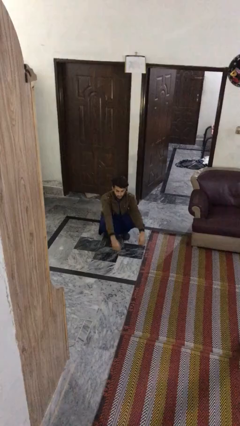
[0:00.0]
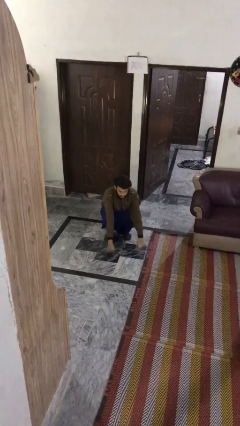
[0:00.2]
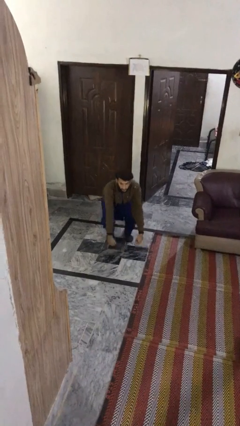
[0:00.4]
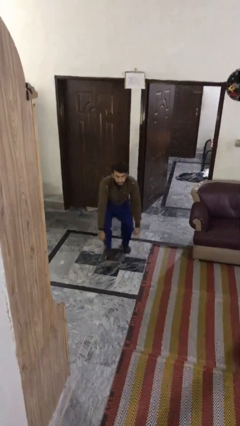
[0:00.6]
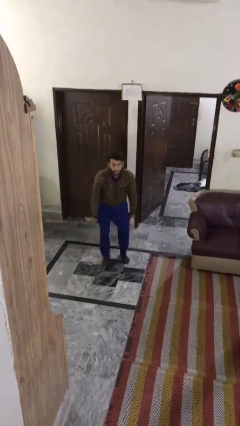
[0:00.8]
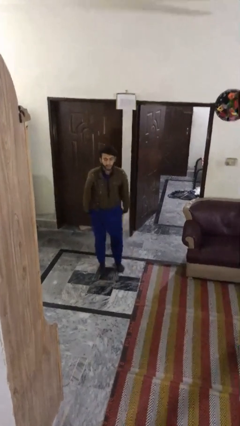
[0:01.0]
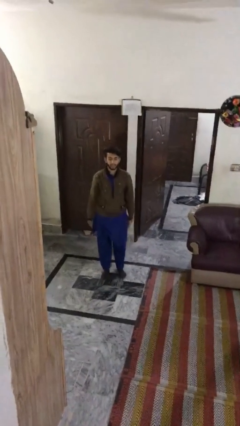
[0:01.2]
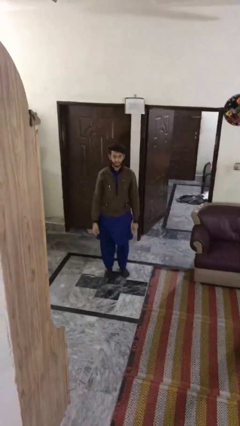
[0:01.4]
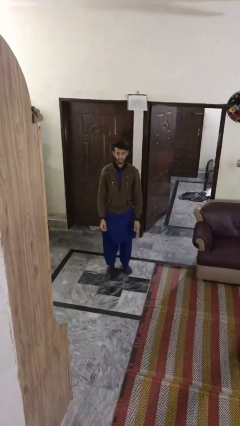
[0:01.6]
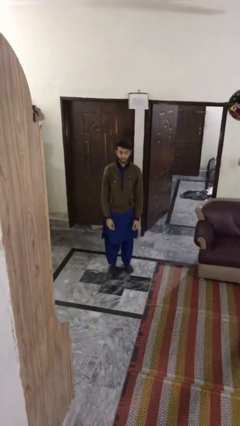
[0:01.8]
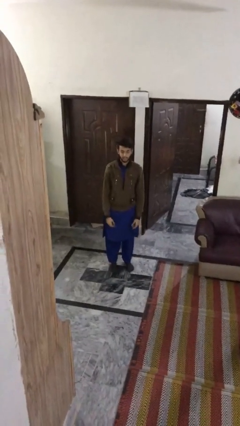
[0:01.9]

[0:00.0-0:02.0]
person stands up

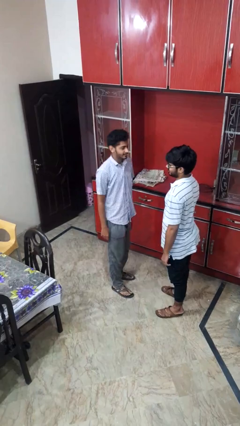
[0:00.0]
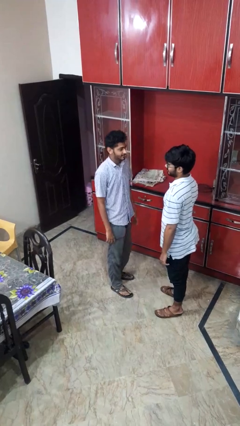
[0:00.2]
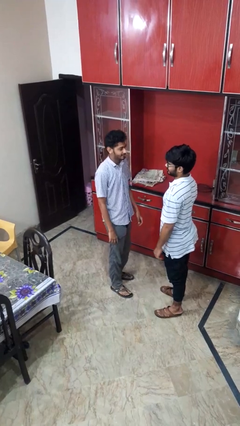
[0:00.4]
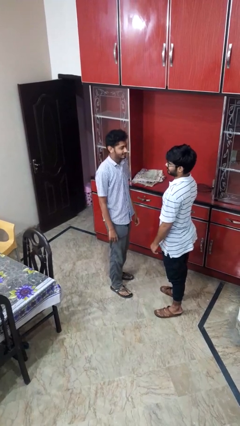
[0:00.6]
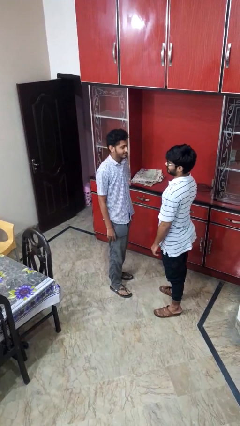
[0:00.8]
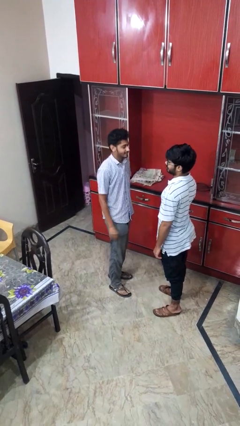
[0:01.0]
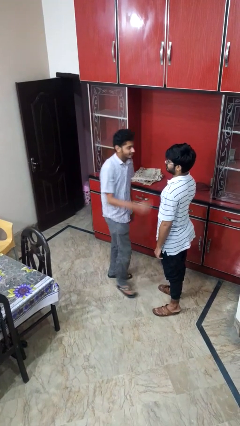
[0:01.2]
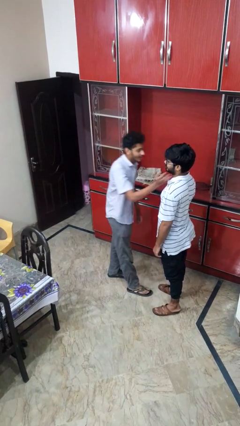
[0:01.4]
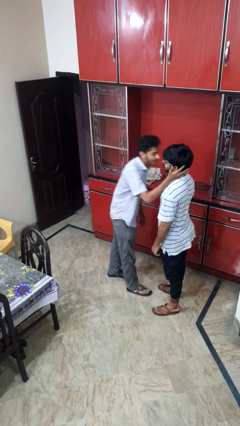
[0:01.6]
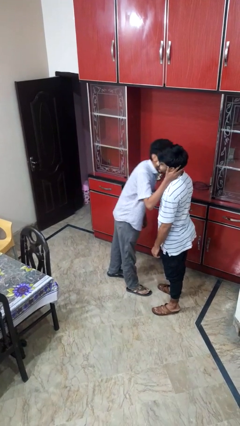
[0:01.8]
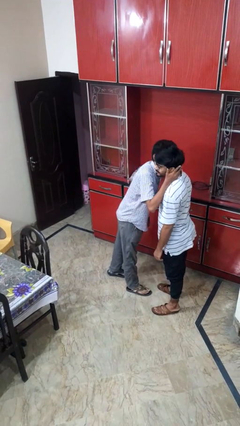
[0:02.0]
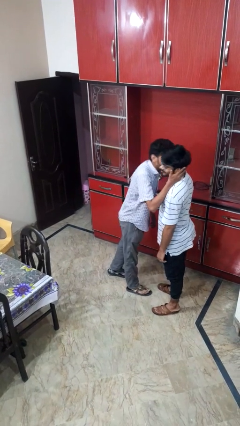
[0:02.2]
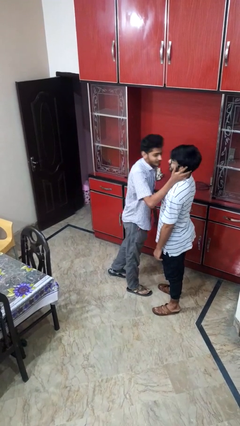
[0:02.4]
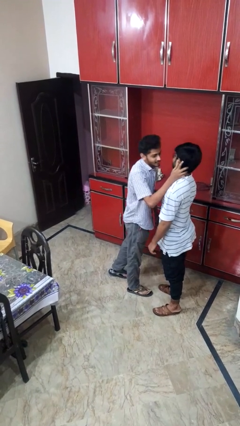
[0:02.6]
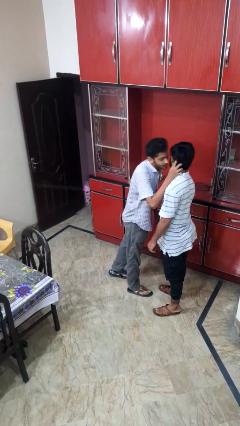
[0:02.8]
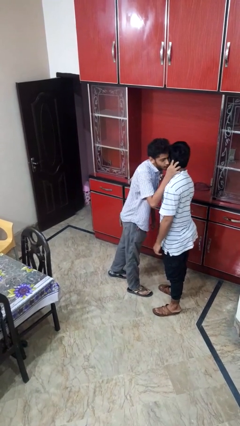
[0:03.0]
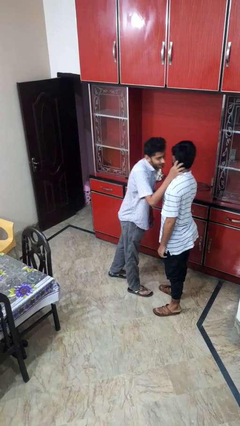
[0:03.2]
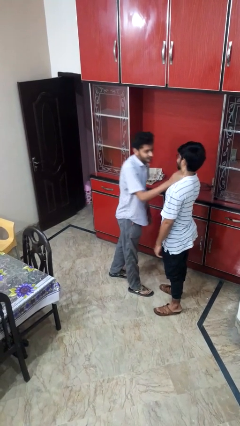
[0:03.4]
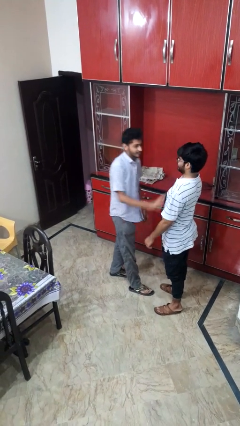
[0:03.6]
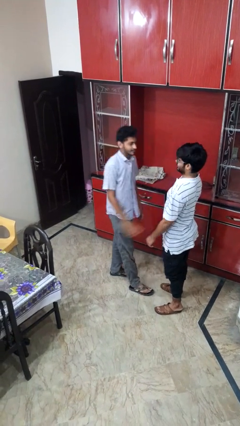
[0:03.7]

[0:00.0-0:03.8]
person kisses cheek of person

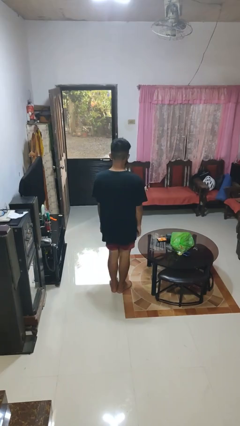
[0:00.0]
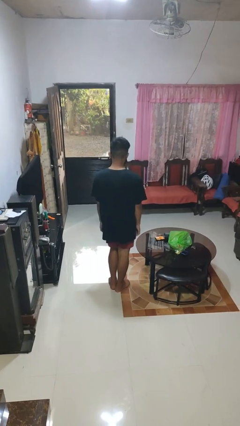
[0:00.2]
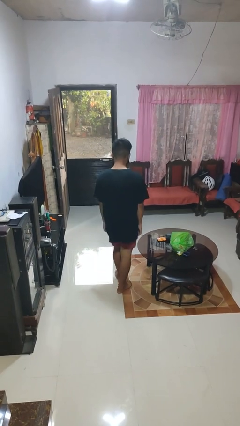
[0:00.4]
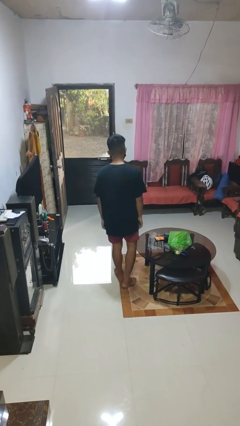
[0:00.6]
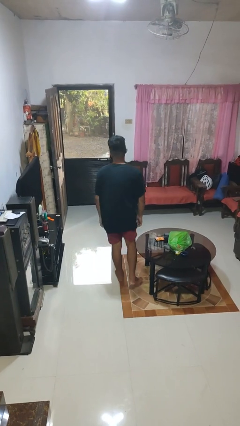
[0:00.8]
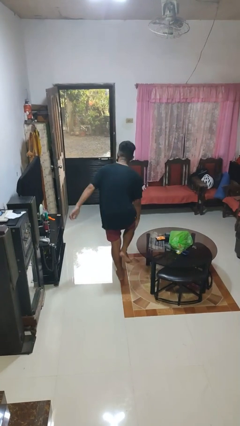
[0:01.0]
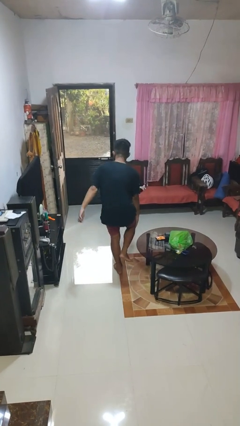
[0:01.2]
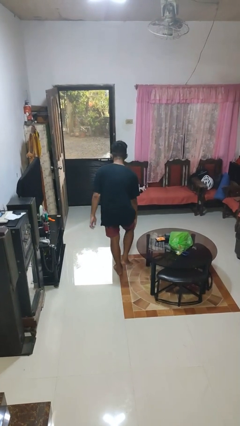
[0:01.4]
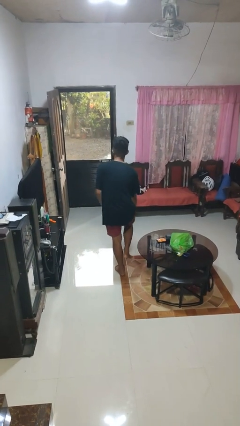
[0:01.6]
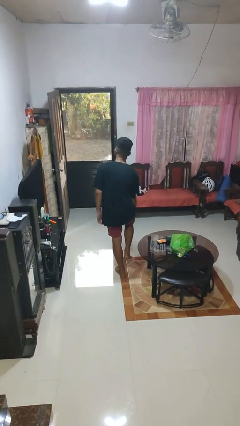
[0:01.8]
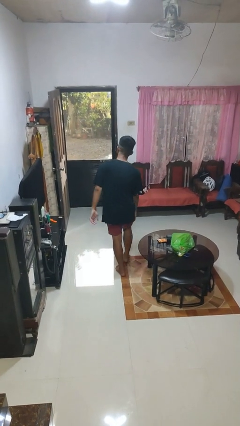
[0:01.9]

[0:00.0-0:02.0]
person bumps into table

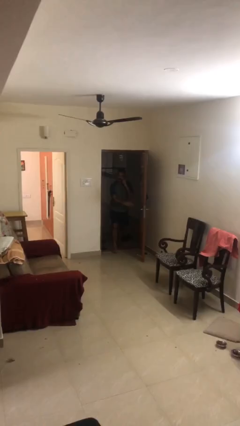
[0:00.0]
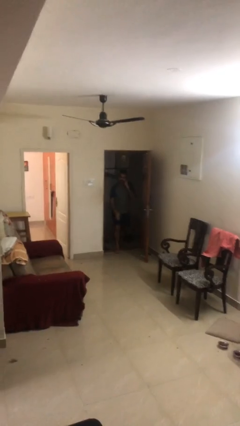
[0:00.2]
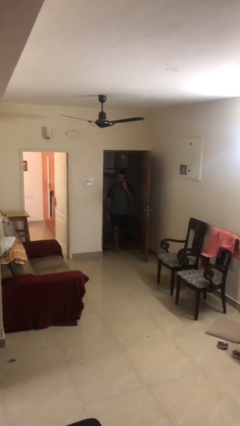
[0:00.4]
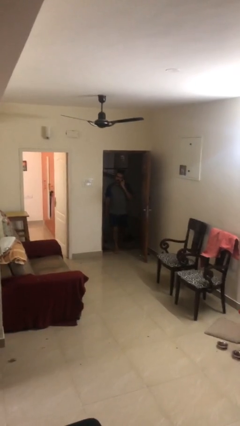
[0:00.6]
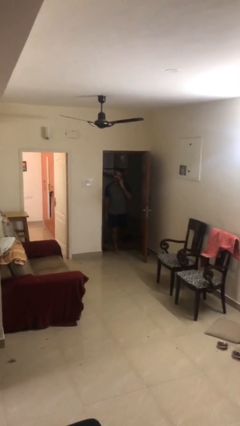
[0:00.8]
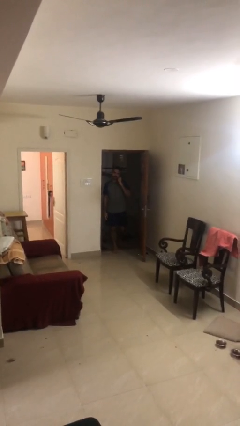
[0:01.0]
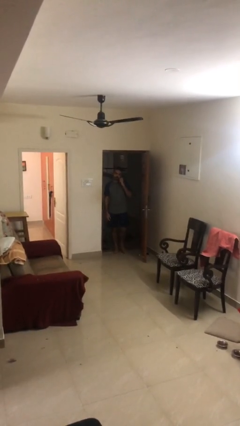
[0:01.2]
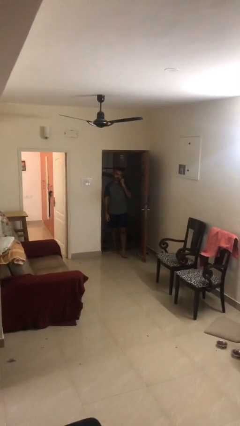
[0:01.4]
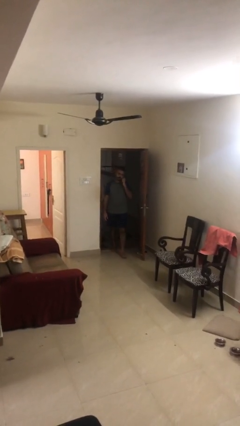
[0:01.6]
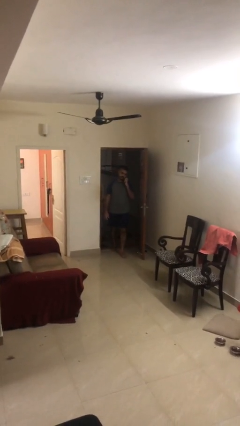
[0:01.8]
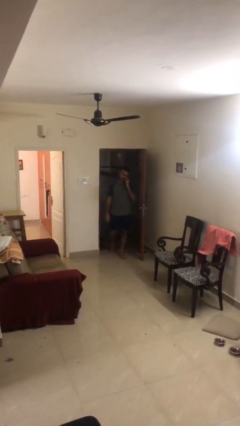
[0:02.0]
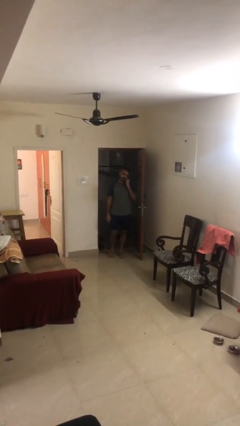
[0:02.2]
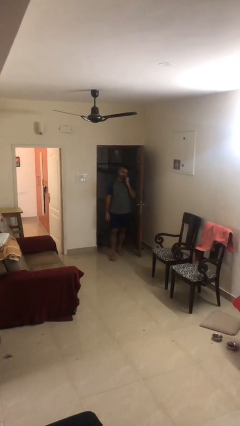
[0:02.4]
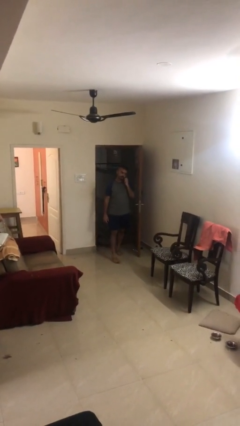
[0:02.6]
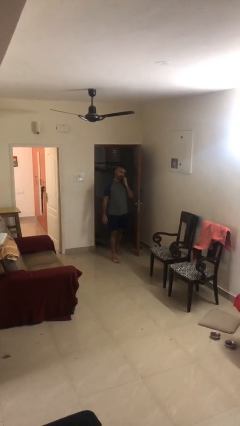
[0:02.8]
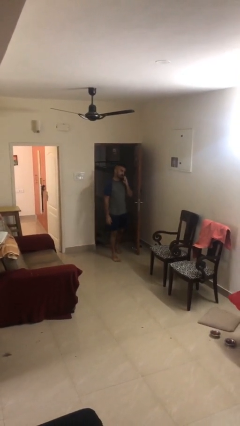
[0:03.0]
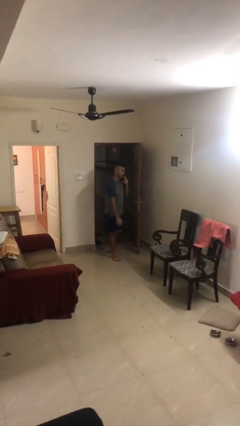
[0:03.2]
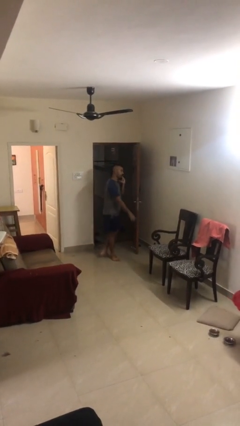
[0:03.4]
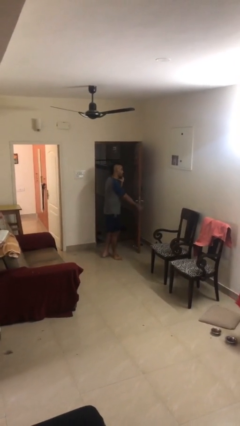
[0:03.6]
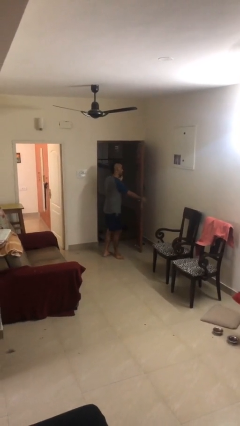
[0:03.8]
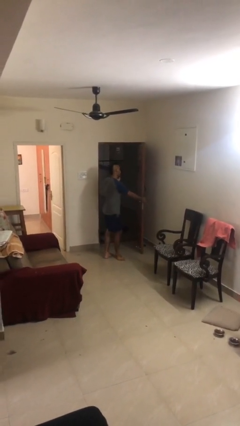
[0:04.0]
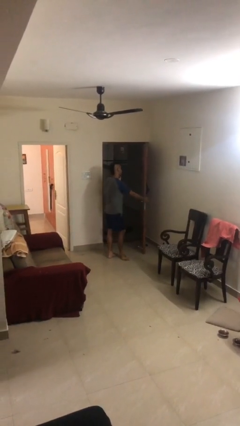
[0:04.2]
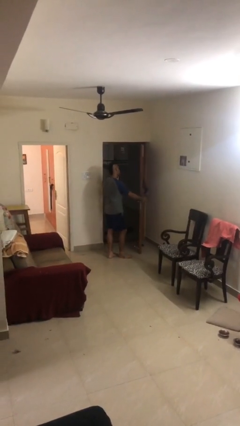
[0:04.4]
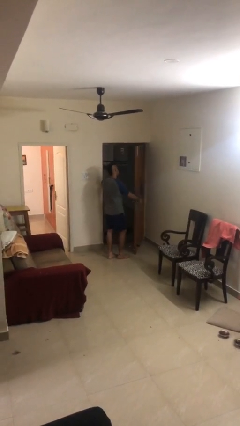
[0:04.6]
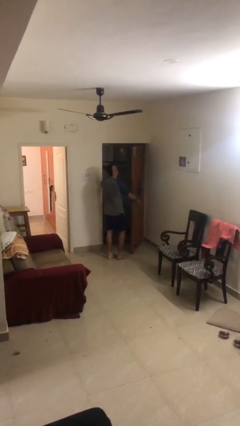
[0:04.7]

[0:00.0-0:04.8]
person enters scene through structure

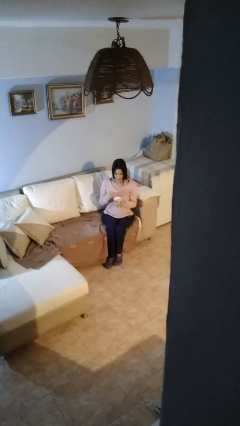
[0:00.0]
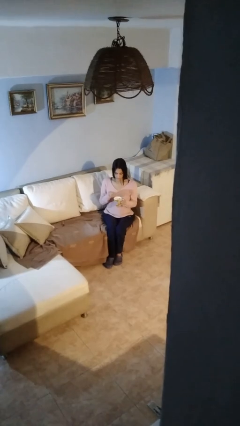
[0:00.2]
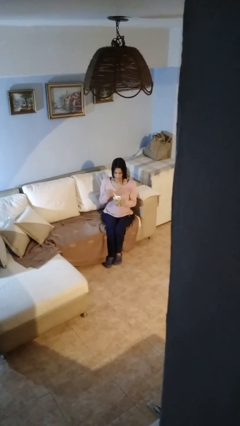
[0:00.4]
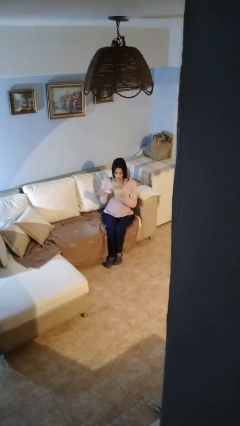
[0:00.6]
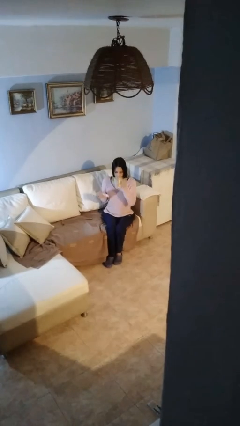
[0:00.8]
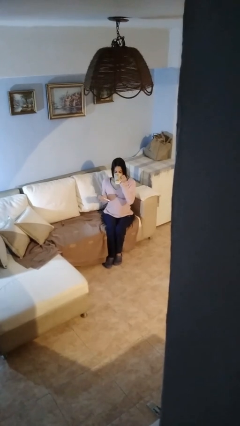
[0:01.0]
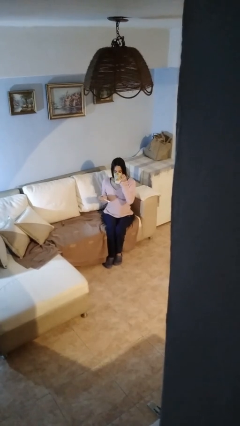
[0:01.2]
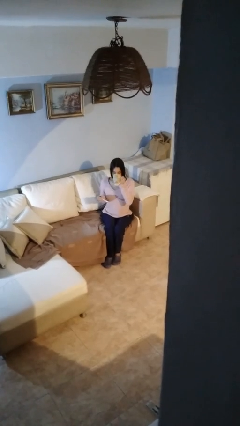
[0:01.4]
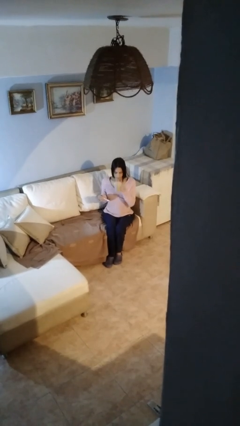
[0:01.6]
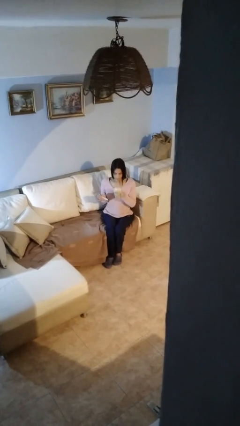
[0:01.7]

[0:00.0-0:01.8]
person drinks from mug

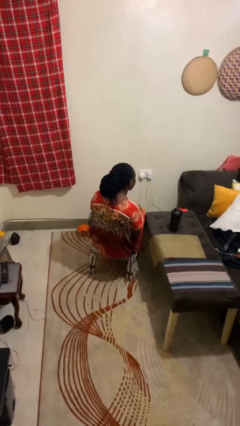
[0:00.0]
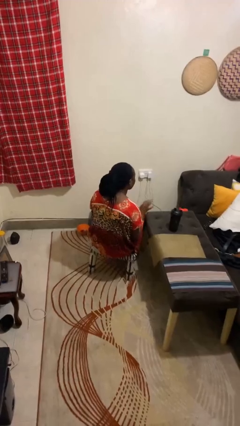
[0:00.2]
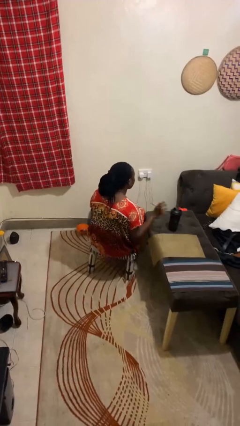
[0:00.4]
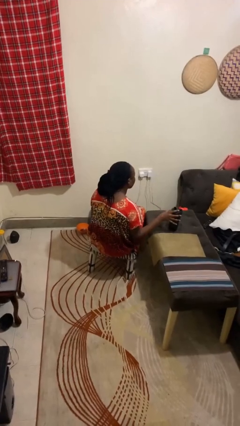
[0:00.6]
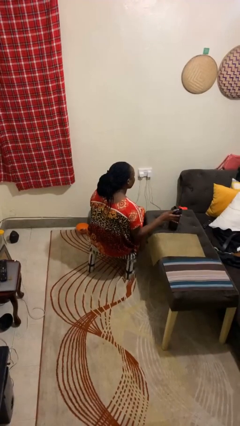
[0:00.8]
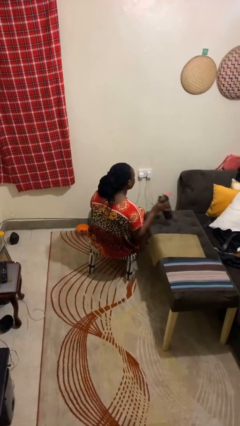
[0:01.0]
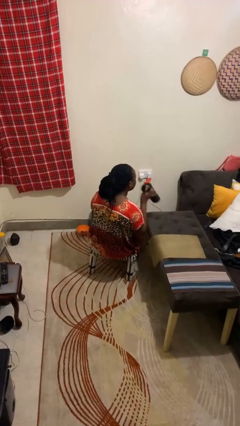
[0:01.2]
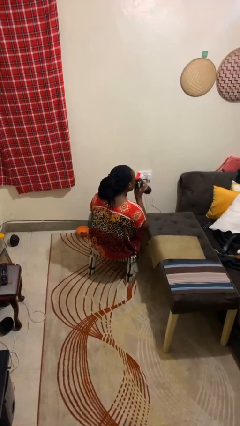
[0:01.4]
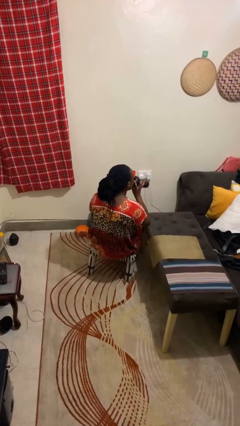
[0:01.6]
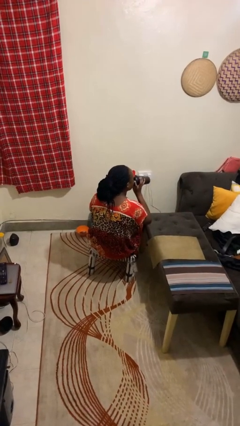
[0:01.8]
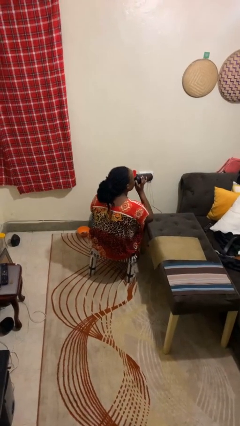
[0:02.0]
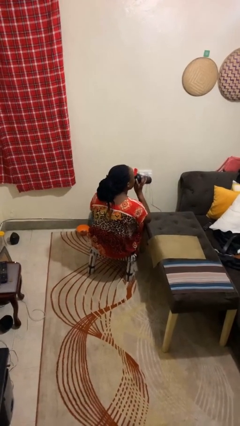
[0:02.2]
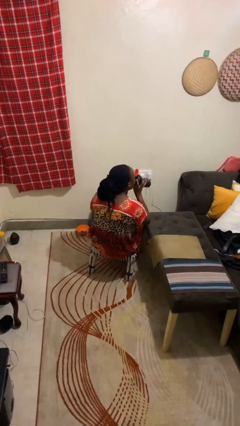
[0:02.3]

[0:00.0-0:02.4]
person drinks from cup

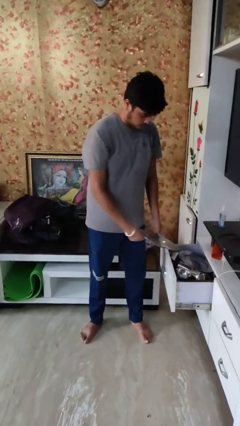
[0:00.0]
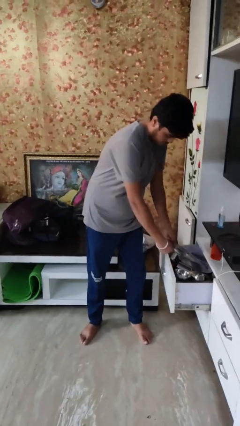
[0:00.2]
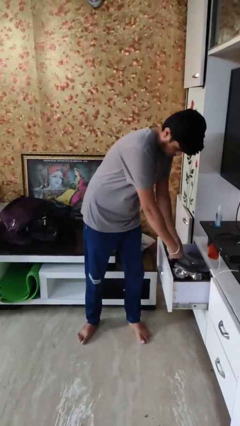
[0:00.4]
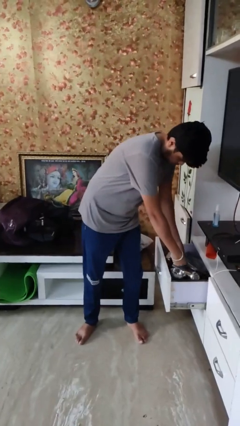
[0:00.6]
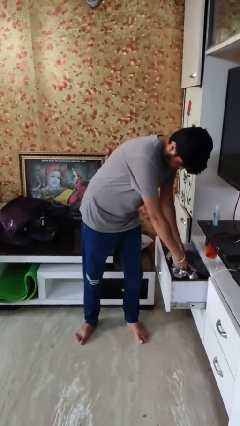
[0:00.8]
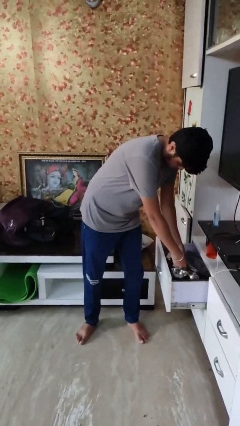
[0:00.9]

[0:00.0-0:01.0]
person puts object into kitchen drawer
